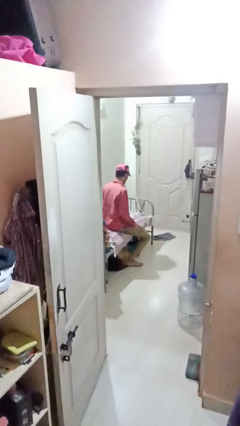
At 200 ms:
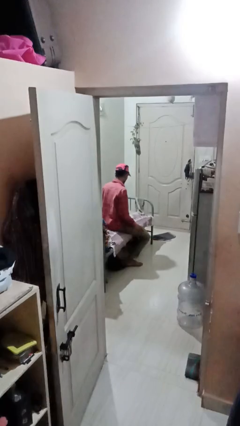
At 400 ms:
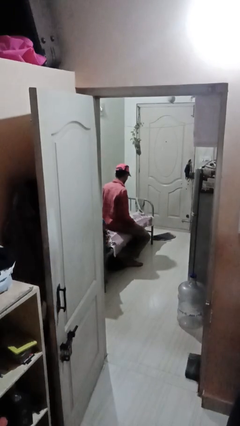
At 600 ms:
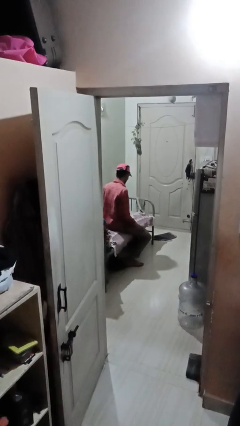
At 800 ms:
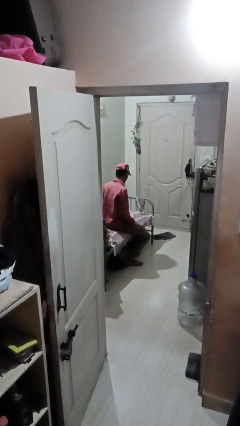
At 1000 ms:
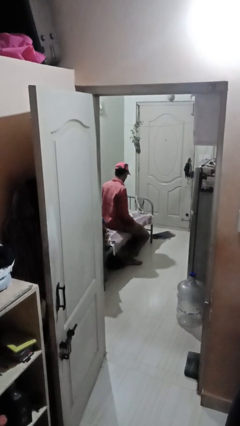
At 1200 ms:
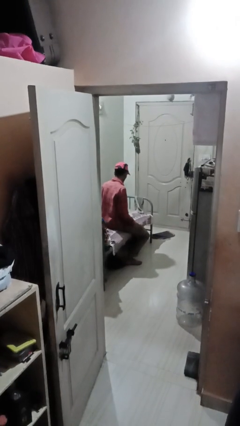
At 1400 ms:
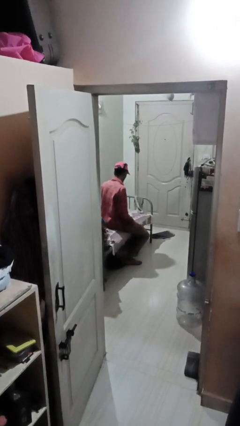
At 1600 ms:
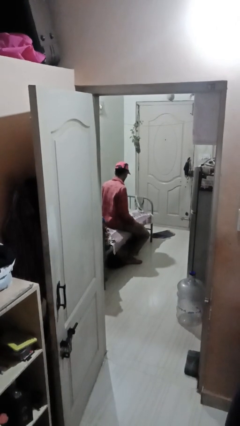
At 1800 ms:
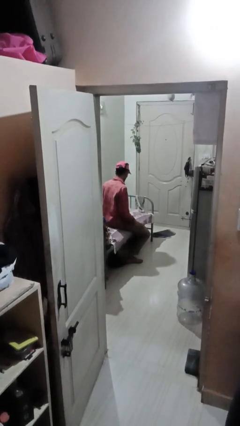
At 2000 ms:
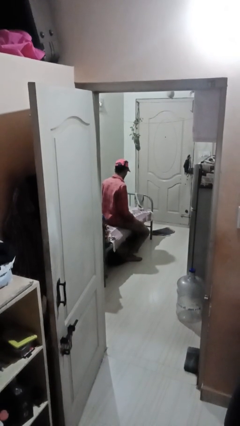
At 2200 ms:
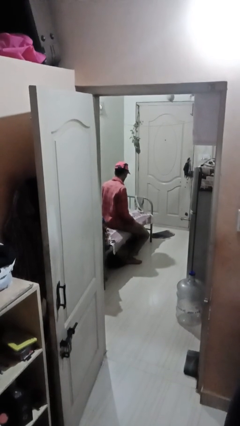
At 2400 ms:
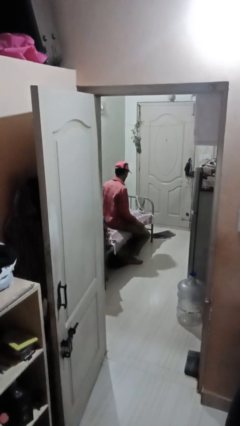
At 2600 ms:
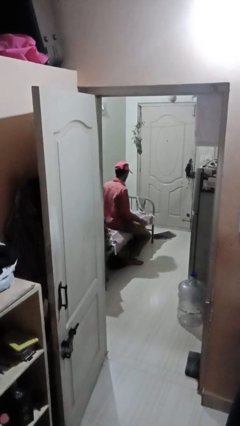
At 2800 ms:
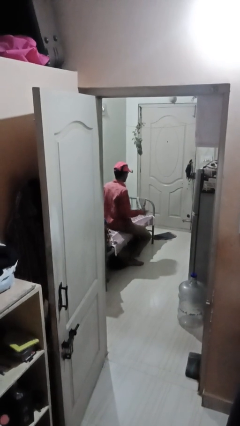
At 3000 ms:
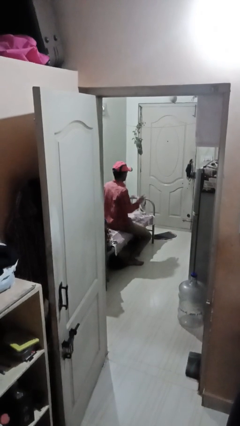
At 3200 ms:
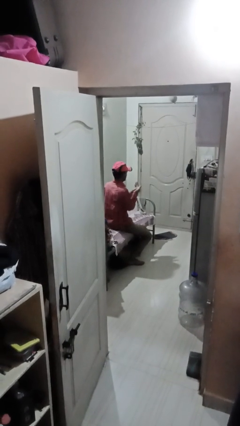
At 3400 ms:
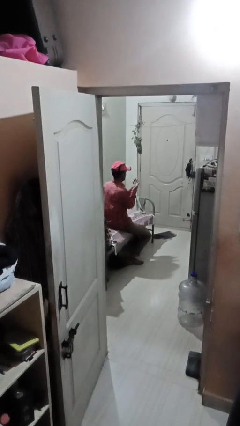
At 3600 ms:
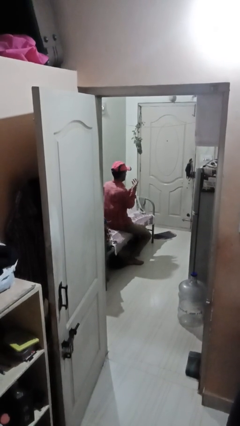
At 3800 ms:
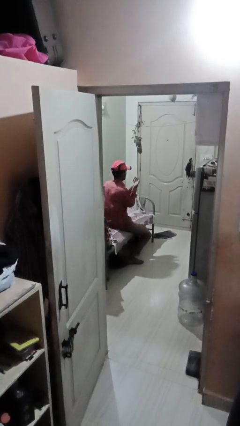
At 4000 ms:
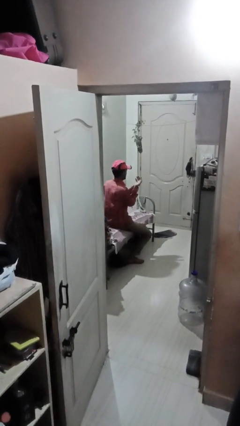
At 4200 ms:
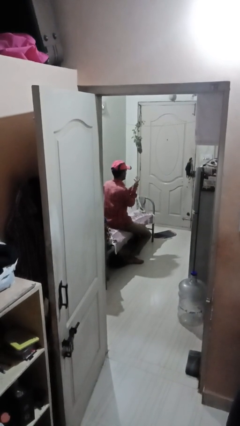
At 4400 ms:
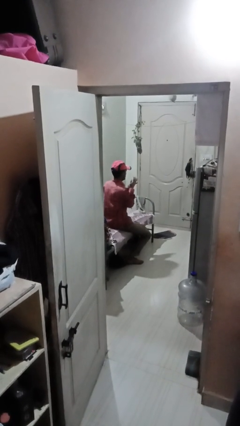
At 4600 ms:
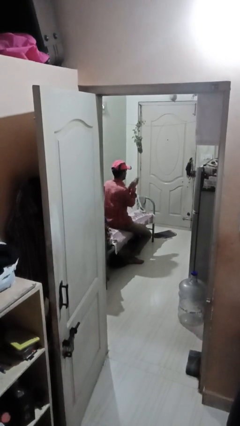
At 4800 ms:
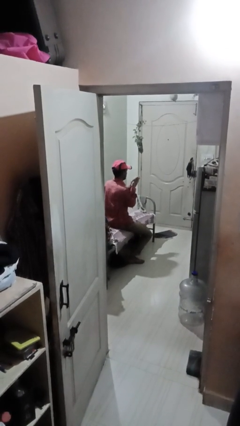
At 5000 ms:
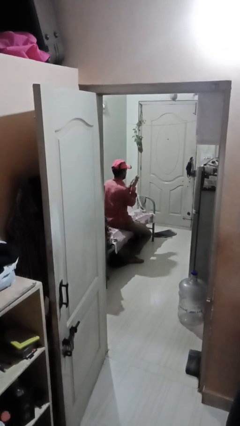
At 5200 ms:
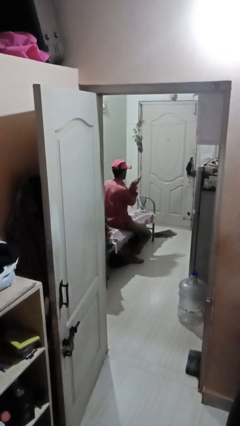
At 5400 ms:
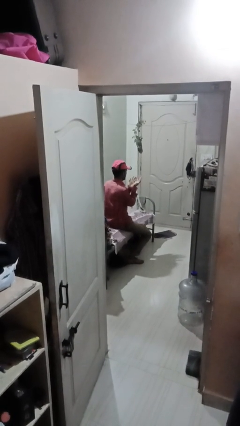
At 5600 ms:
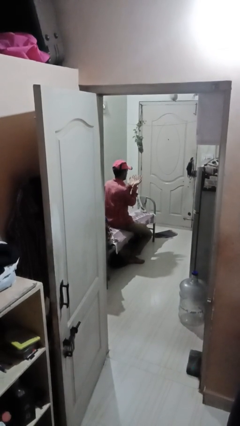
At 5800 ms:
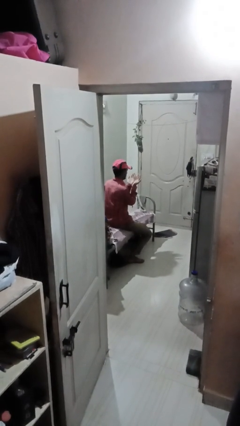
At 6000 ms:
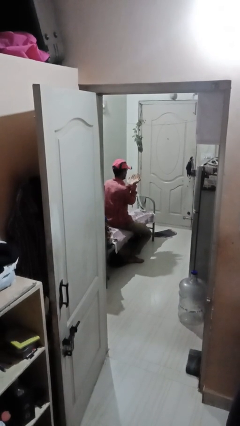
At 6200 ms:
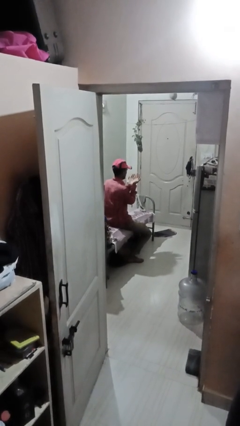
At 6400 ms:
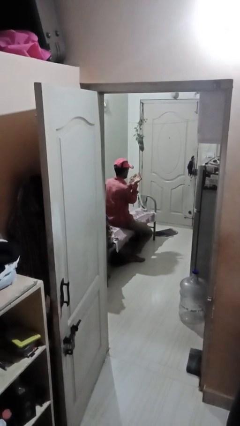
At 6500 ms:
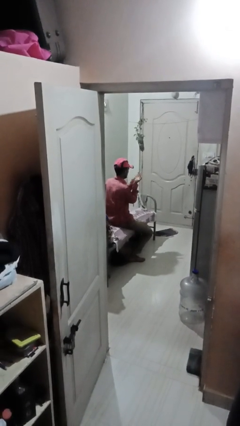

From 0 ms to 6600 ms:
person looks at hands in lap

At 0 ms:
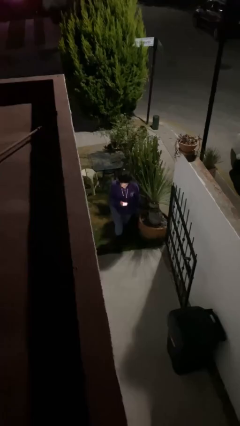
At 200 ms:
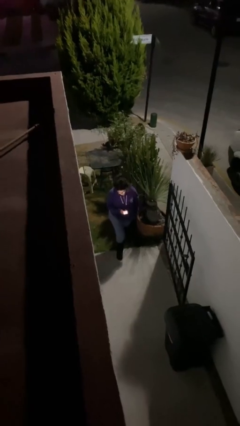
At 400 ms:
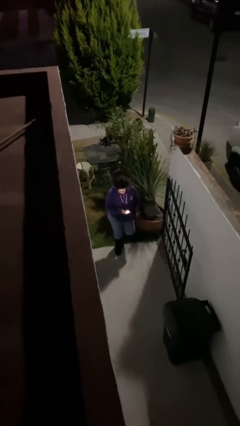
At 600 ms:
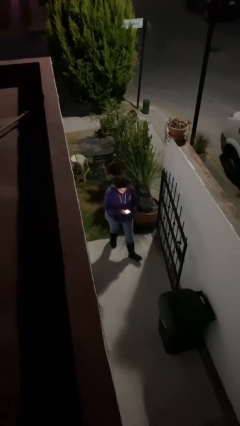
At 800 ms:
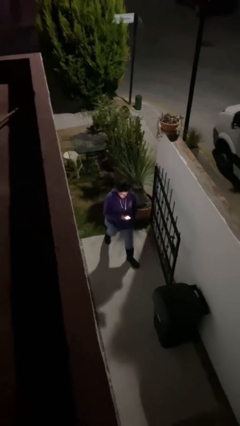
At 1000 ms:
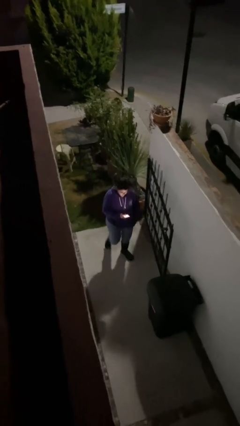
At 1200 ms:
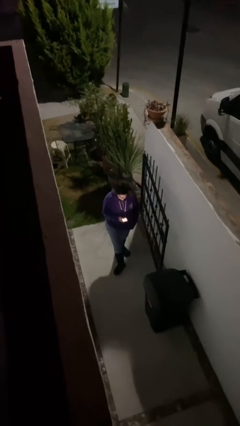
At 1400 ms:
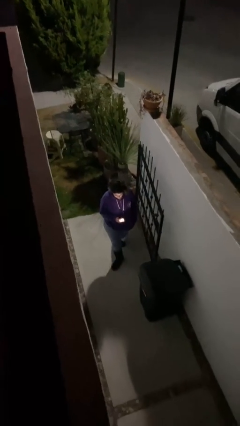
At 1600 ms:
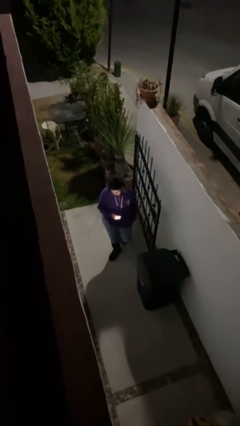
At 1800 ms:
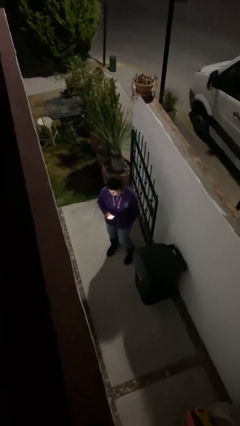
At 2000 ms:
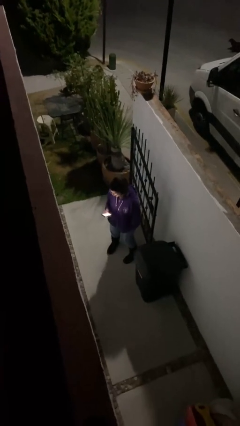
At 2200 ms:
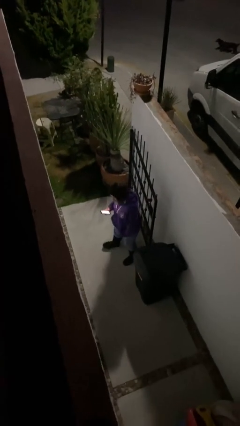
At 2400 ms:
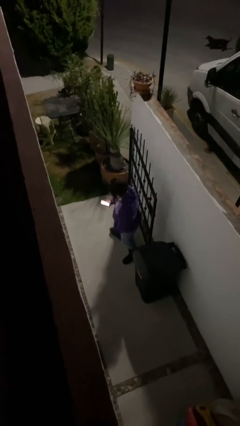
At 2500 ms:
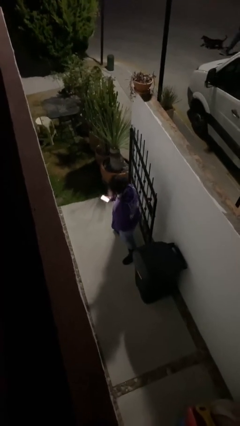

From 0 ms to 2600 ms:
person enters scene through structure

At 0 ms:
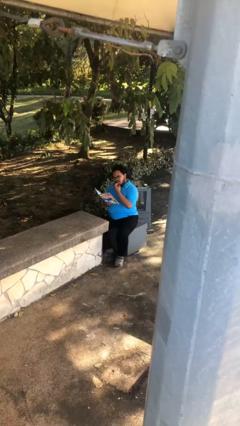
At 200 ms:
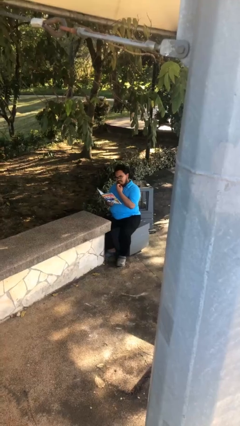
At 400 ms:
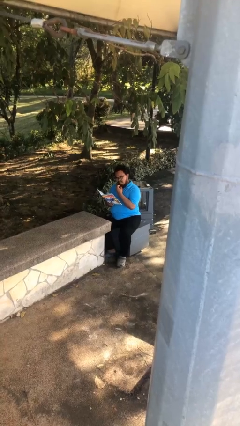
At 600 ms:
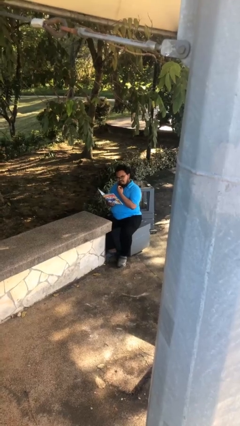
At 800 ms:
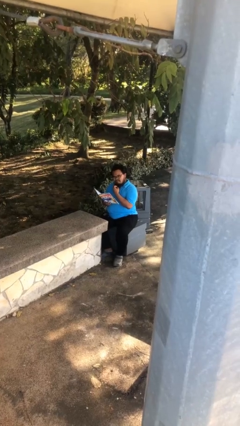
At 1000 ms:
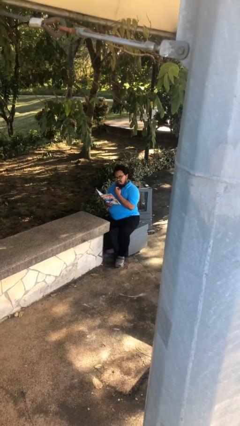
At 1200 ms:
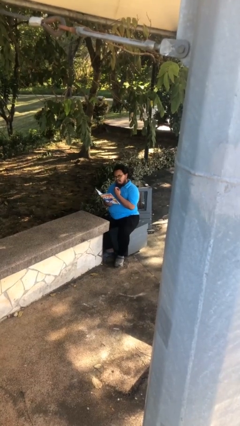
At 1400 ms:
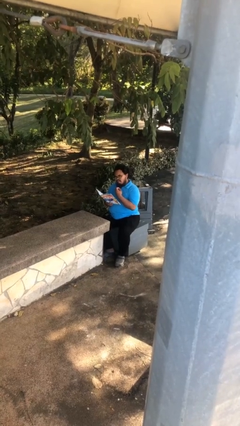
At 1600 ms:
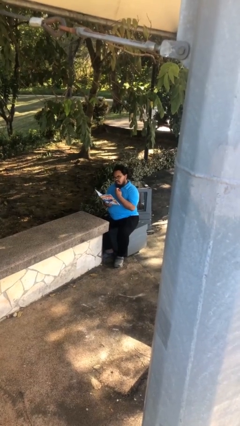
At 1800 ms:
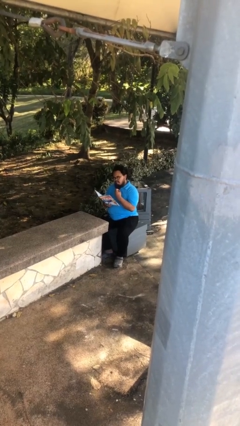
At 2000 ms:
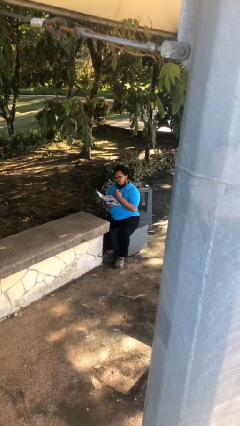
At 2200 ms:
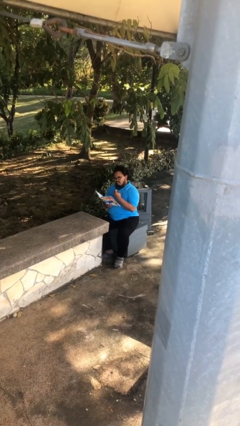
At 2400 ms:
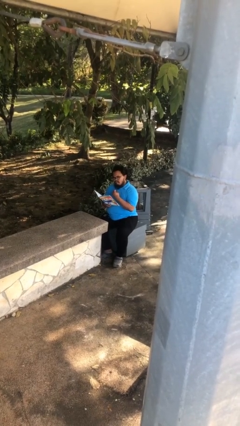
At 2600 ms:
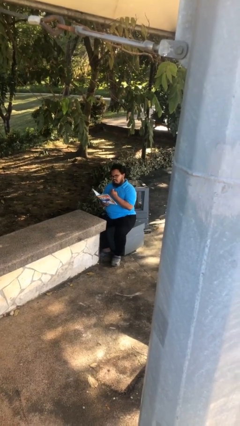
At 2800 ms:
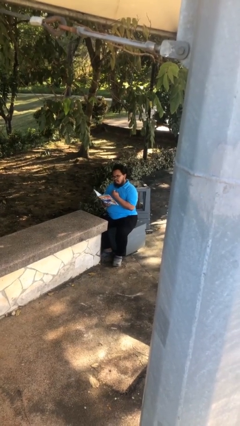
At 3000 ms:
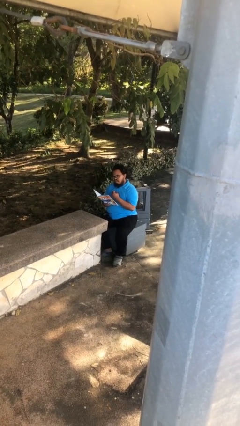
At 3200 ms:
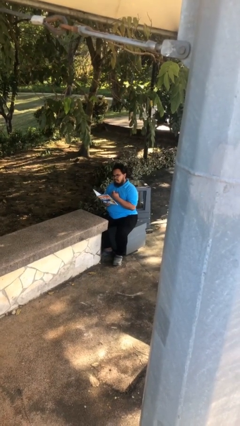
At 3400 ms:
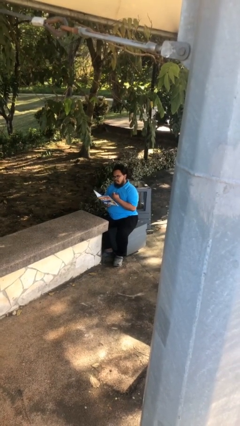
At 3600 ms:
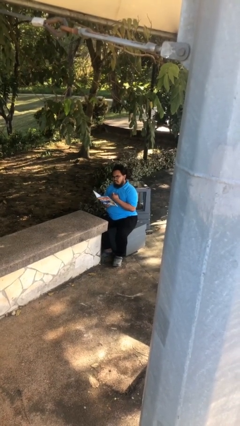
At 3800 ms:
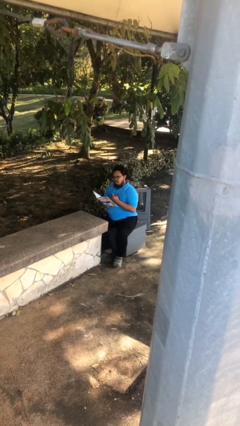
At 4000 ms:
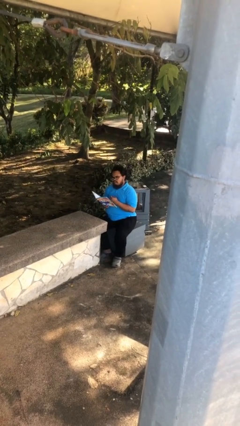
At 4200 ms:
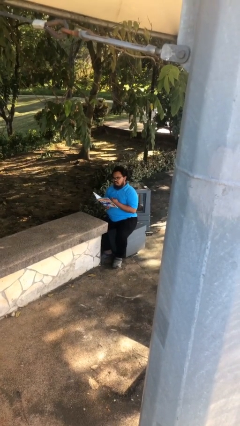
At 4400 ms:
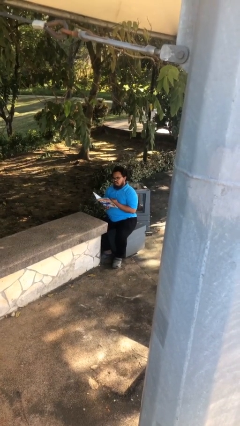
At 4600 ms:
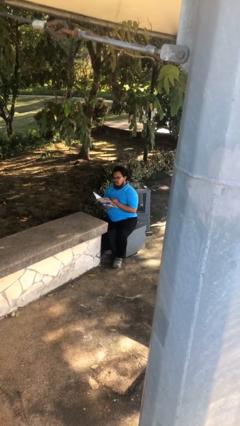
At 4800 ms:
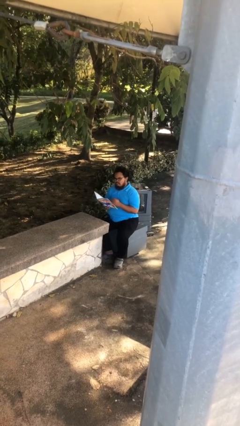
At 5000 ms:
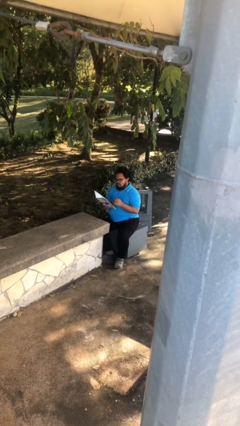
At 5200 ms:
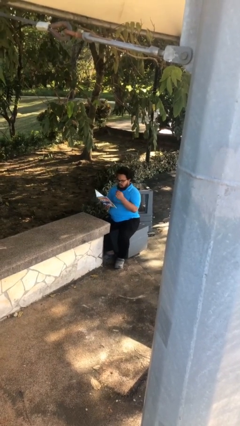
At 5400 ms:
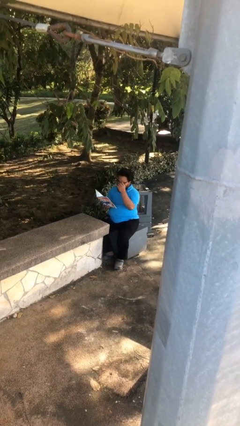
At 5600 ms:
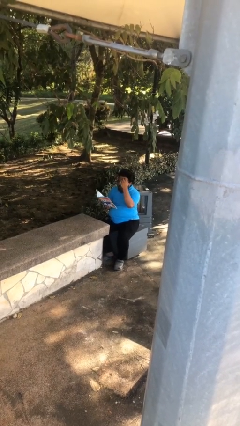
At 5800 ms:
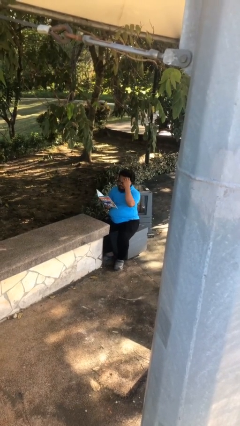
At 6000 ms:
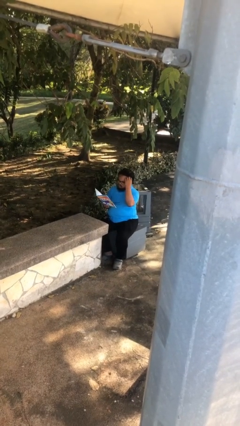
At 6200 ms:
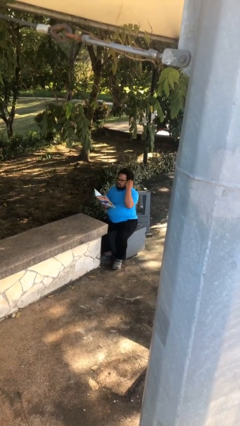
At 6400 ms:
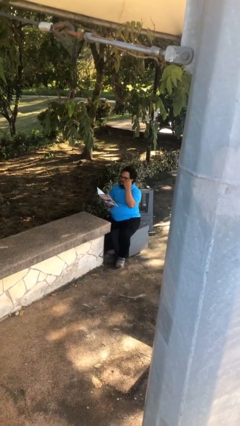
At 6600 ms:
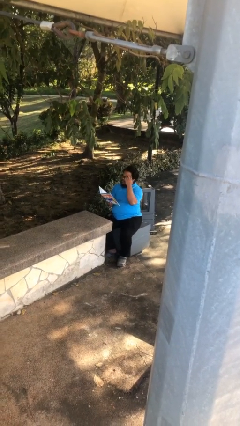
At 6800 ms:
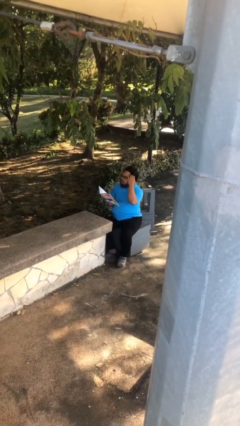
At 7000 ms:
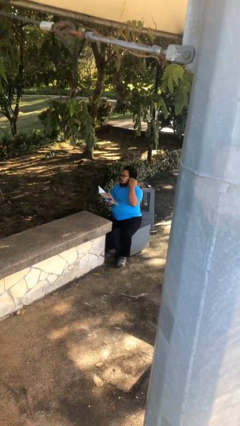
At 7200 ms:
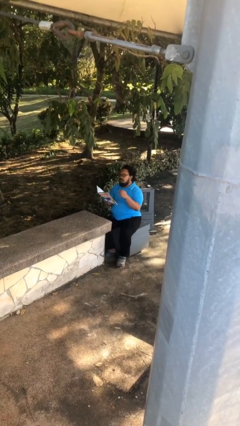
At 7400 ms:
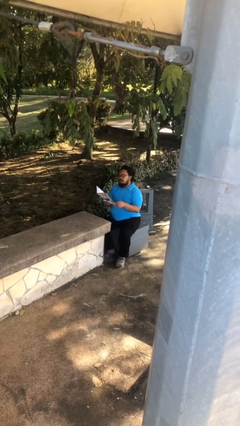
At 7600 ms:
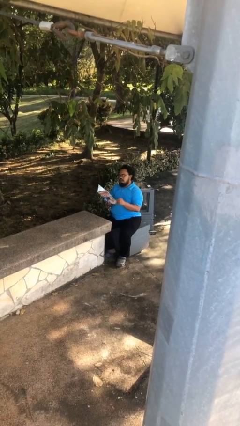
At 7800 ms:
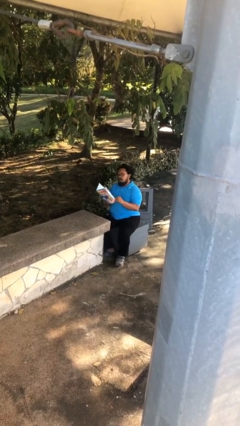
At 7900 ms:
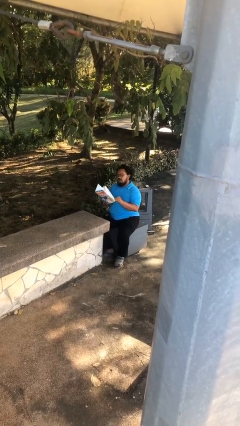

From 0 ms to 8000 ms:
person reads document

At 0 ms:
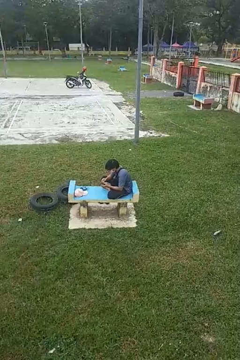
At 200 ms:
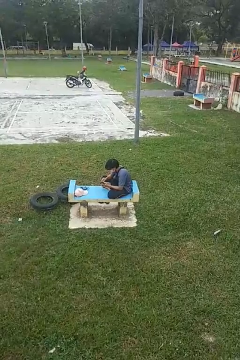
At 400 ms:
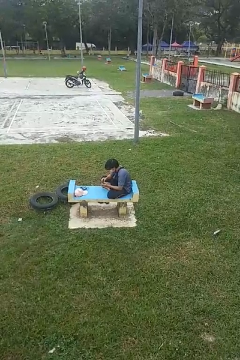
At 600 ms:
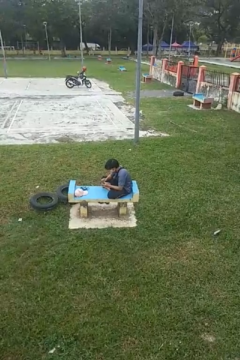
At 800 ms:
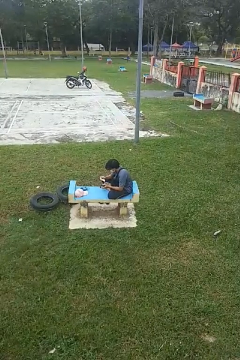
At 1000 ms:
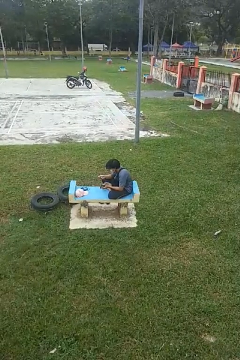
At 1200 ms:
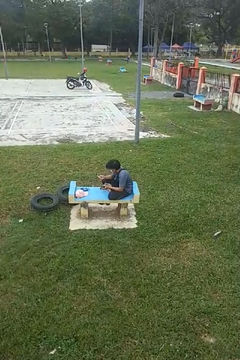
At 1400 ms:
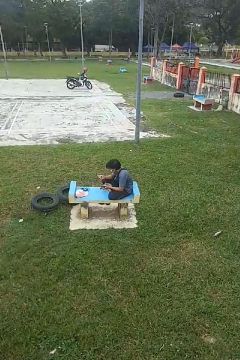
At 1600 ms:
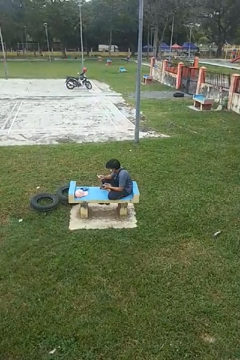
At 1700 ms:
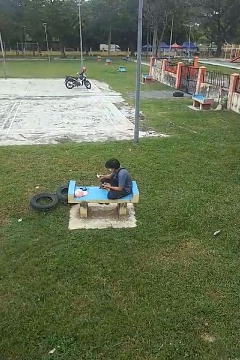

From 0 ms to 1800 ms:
person takes object from purse
